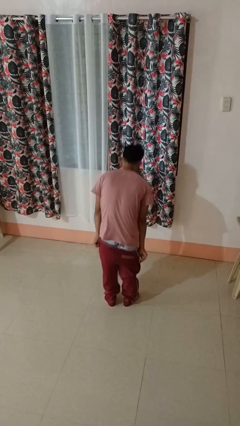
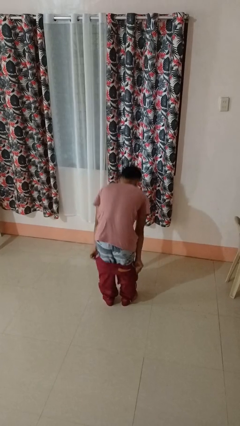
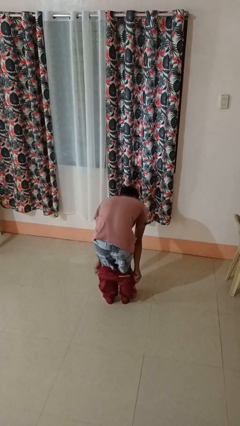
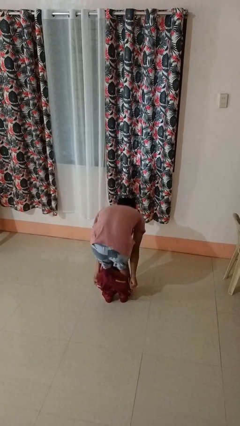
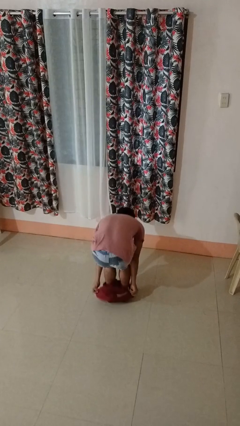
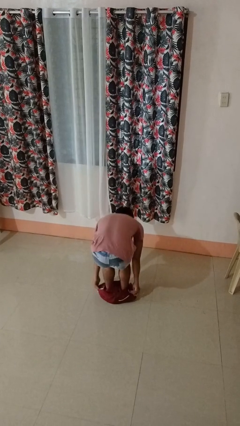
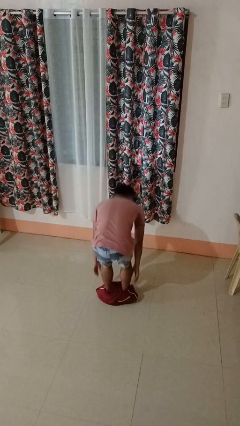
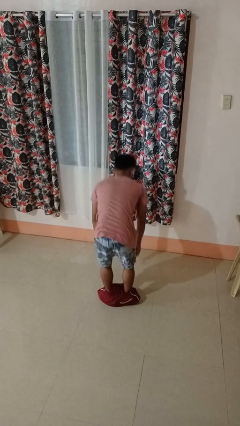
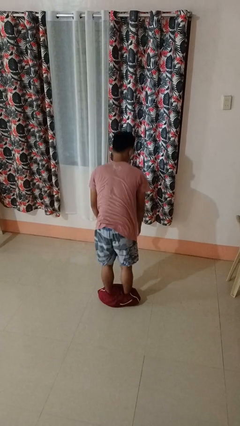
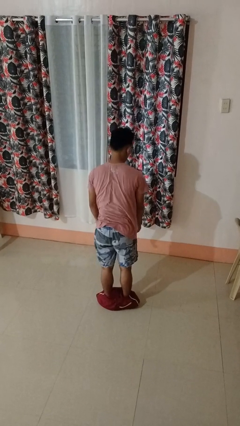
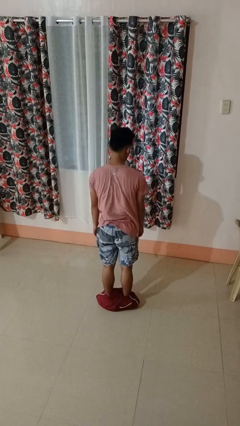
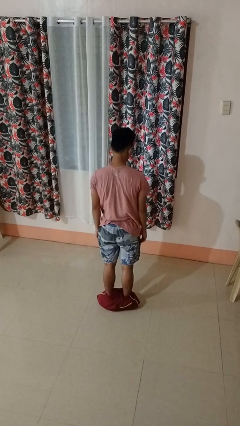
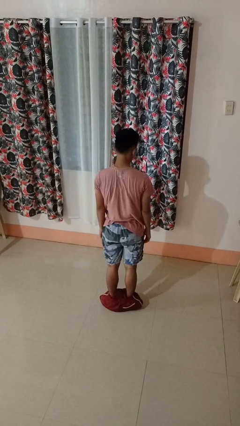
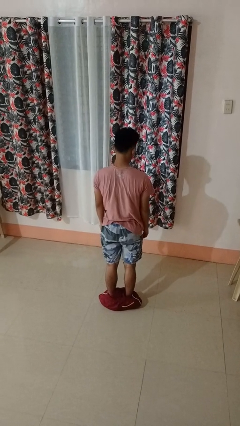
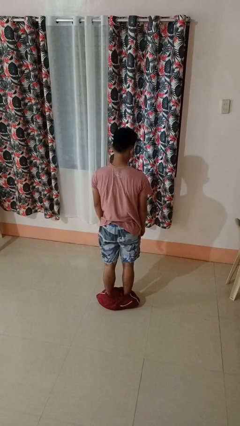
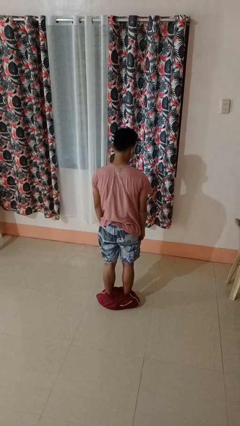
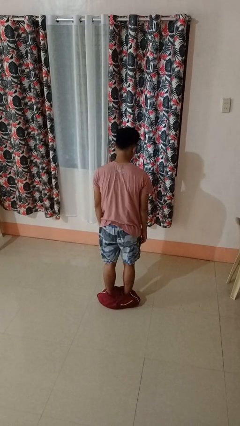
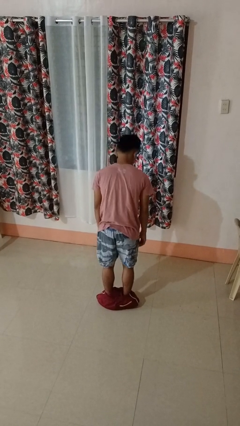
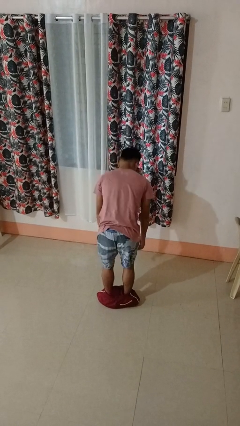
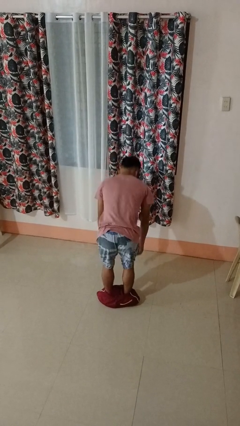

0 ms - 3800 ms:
person takes off pants

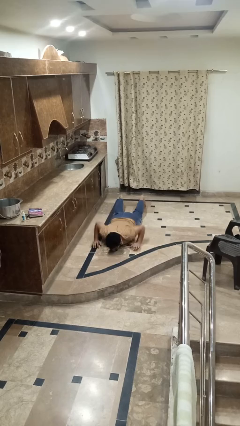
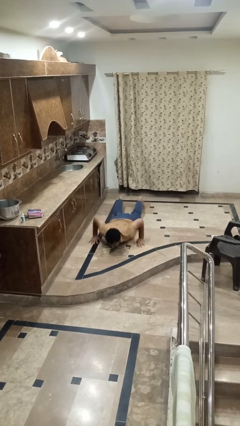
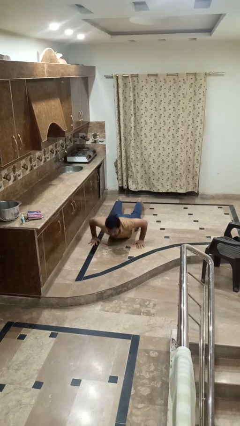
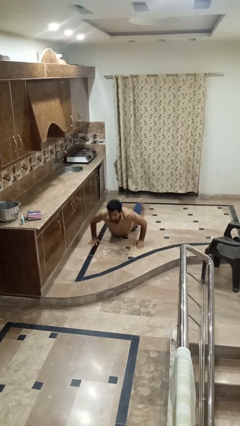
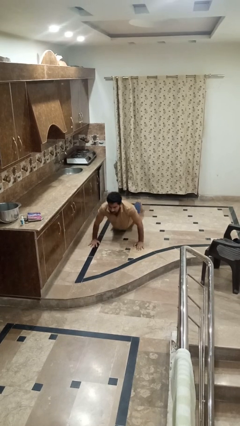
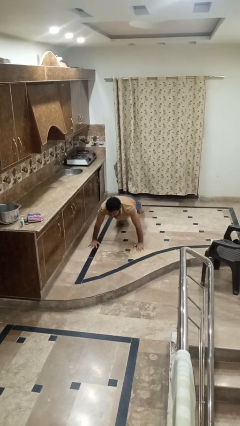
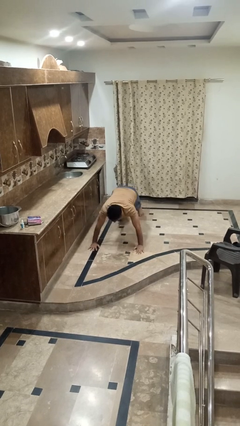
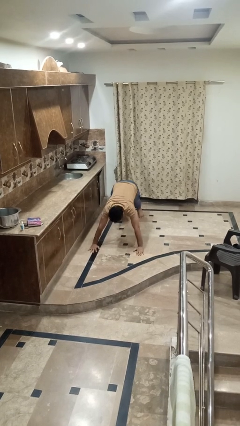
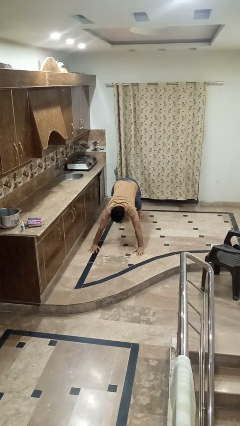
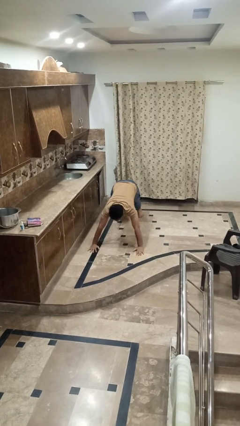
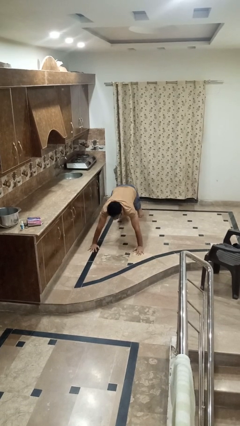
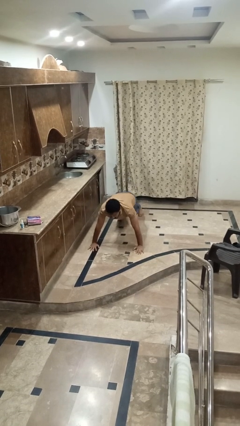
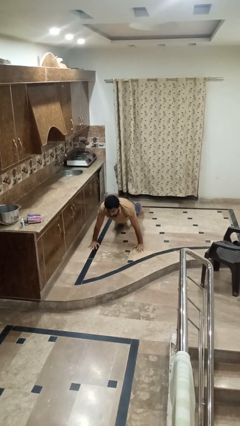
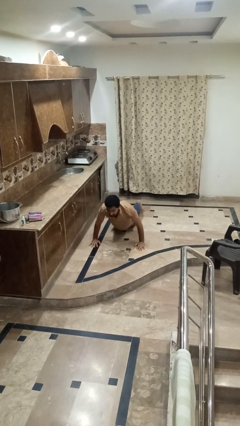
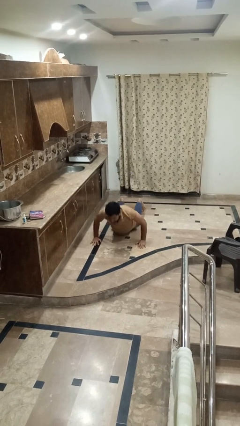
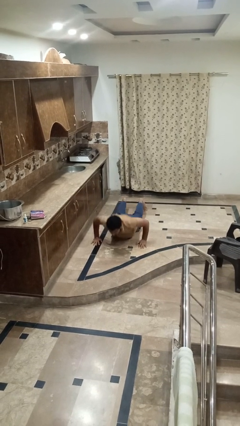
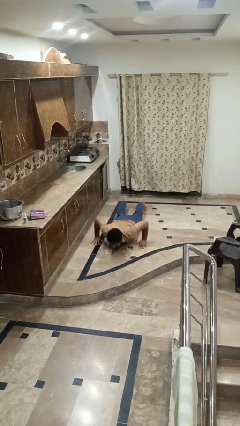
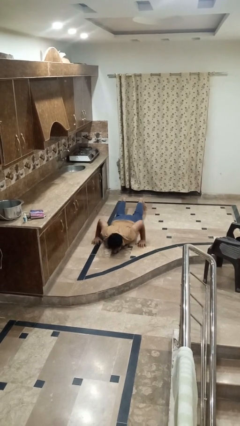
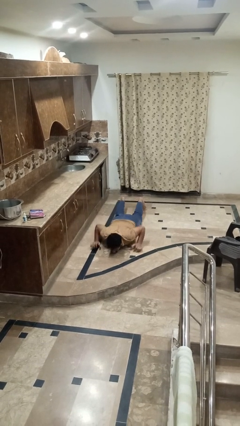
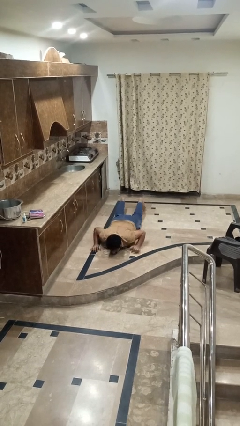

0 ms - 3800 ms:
person exercises with pushup

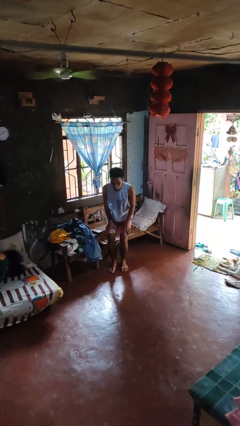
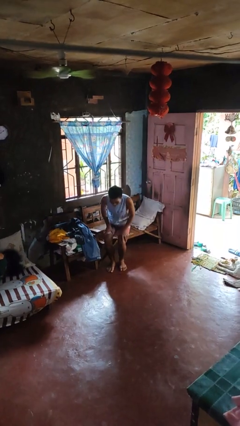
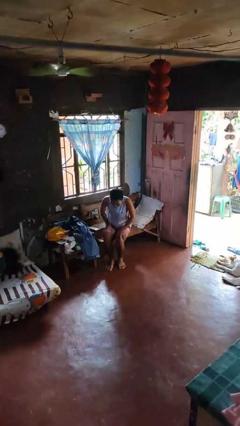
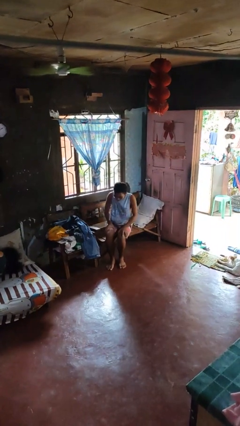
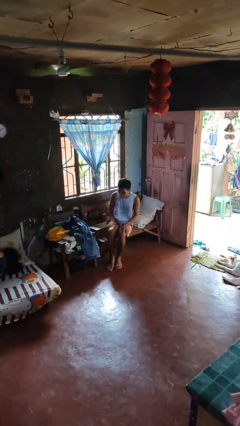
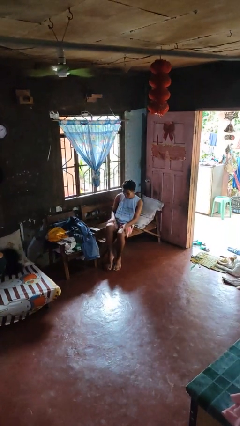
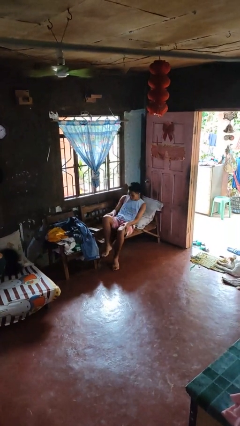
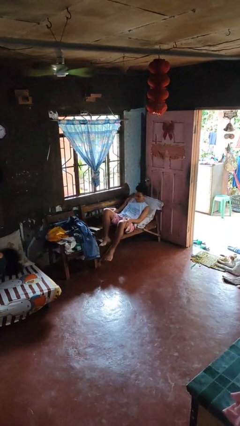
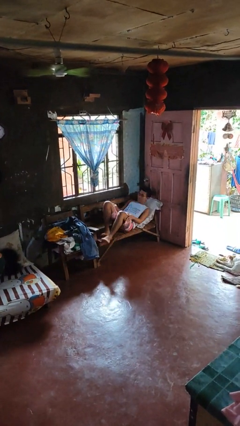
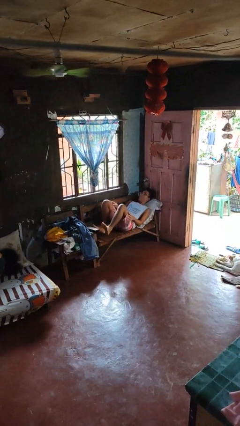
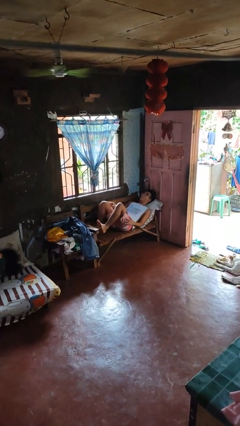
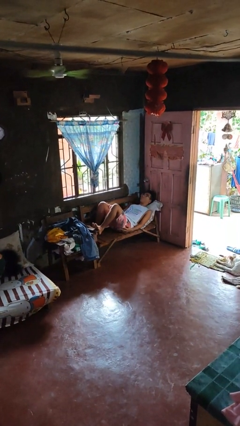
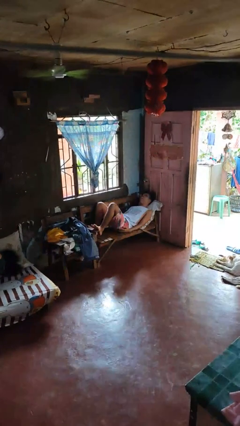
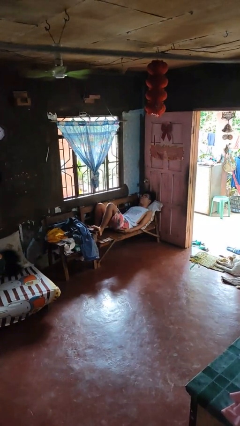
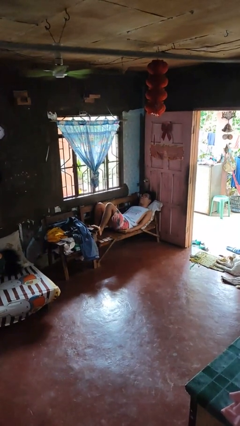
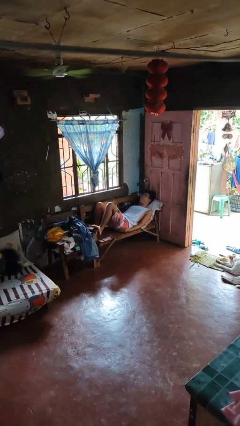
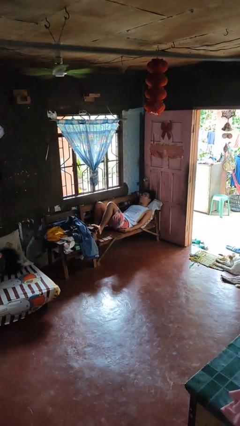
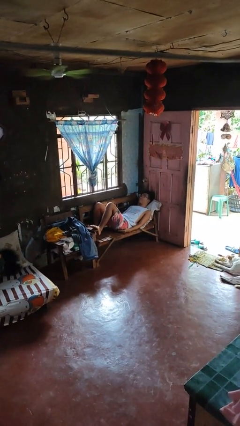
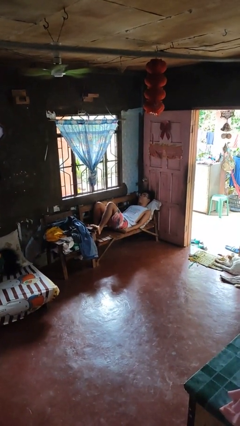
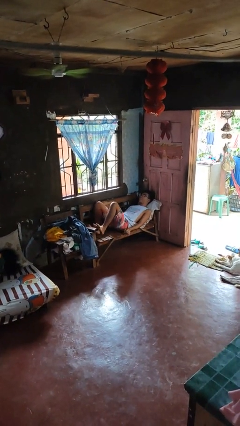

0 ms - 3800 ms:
person lies down on couch

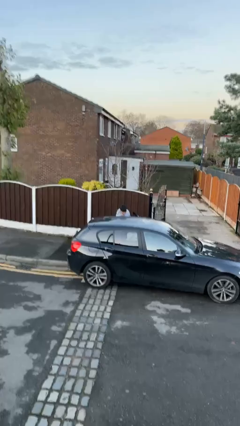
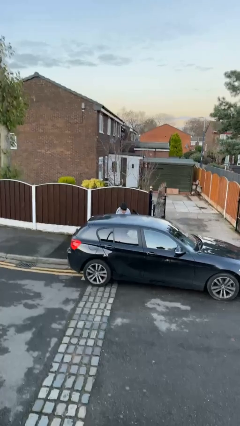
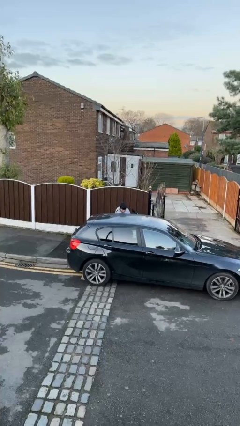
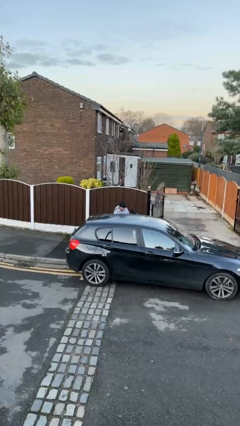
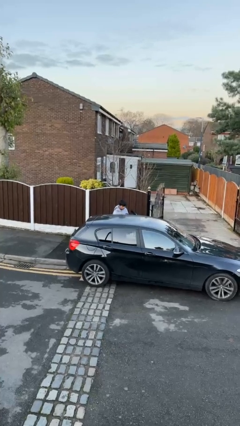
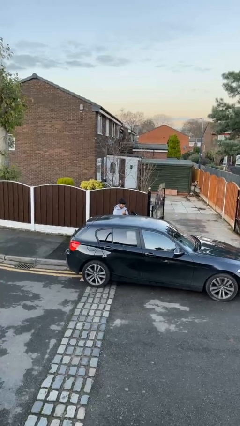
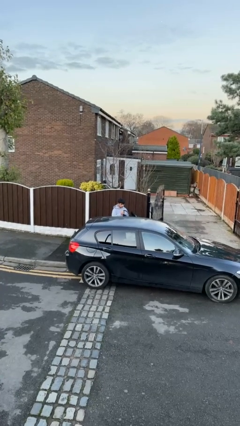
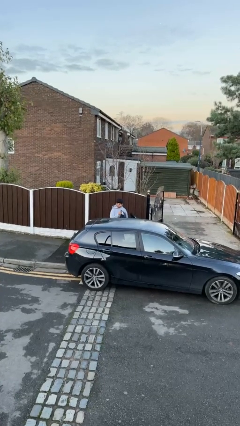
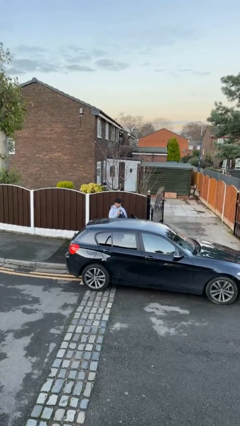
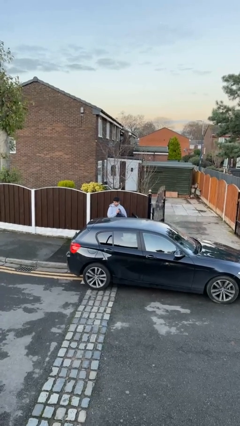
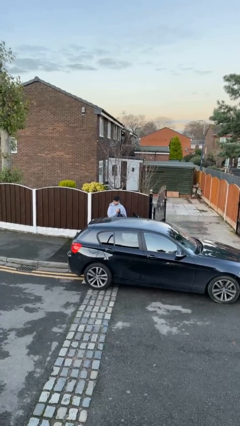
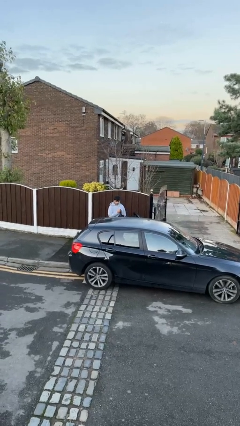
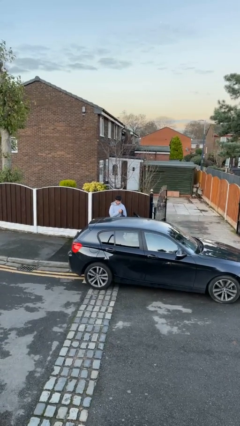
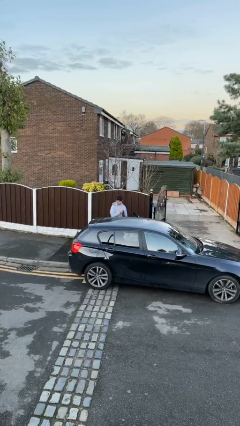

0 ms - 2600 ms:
person unloads car

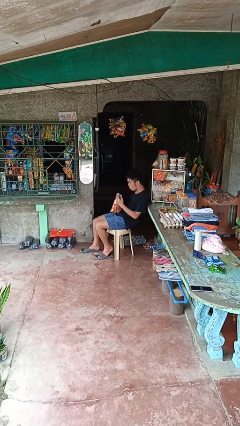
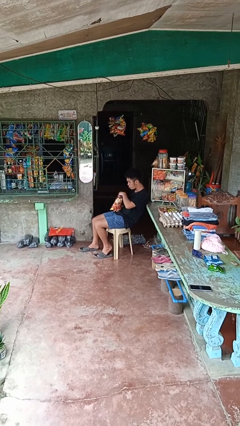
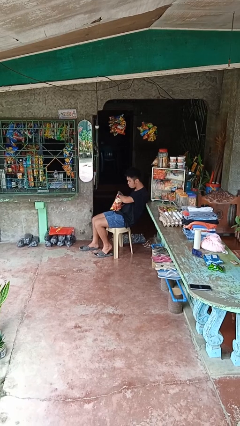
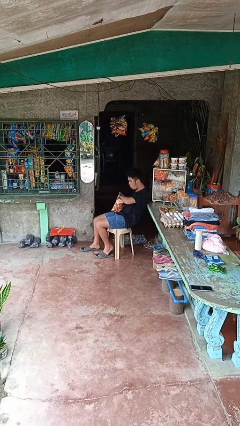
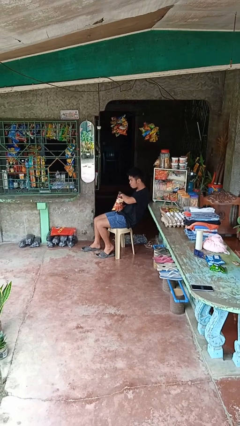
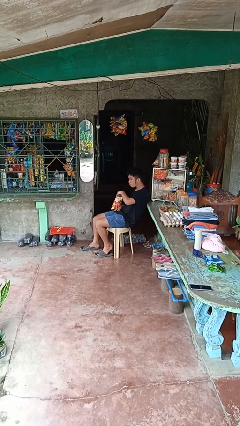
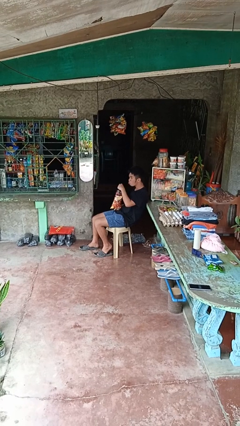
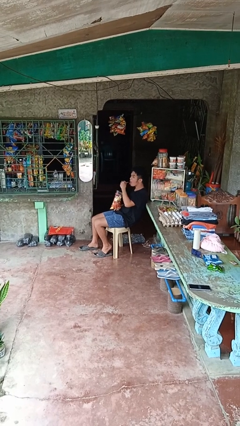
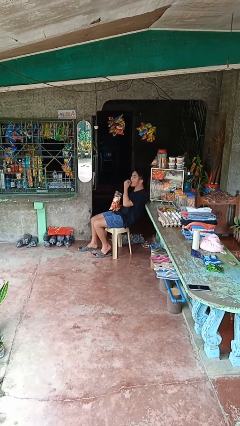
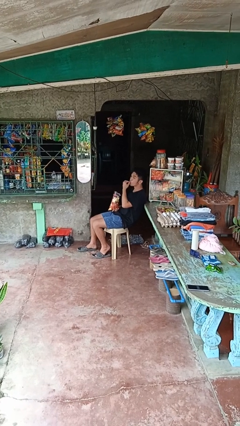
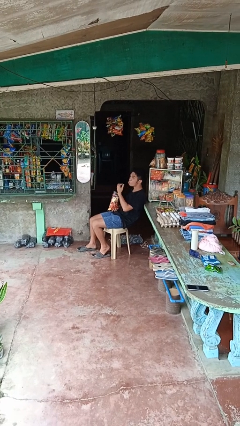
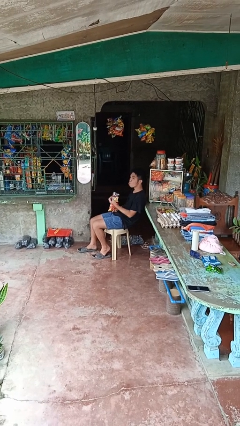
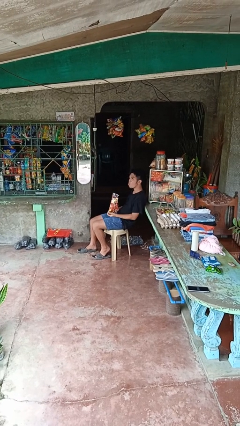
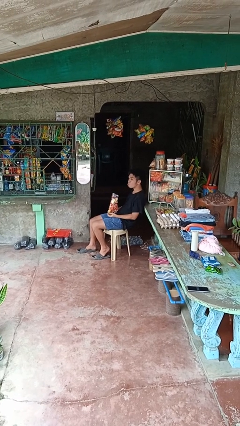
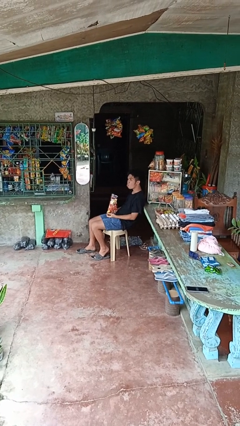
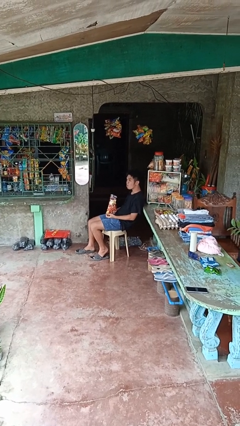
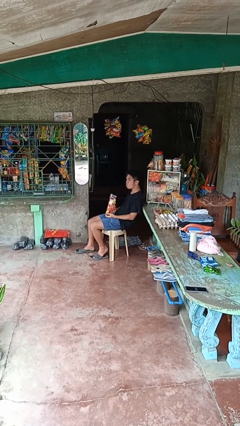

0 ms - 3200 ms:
person eats snack from bag

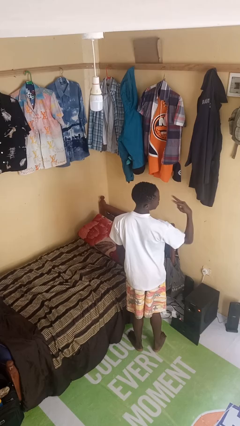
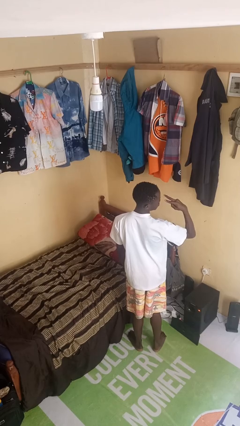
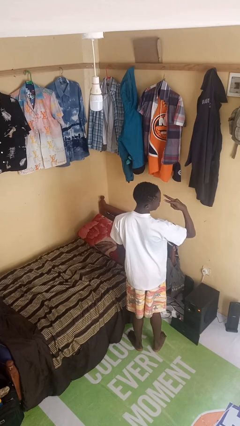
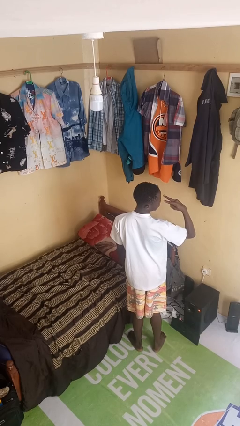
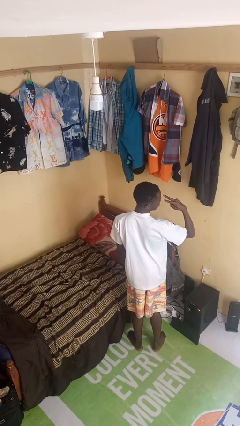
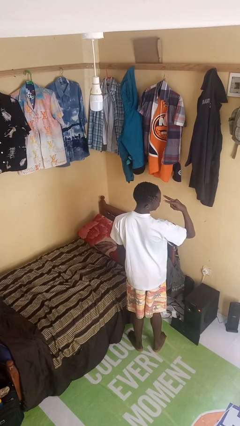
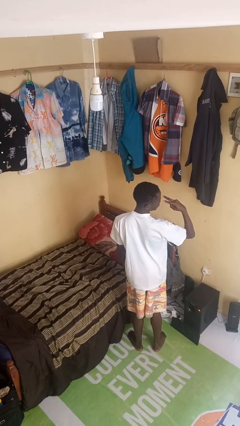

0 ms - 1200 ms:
person gestures watch closely
